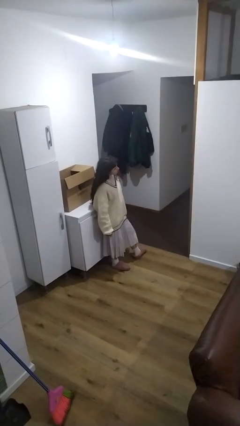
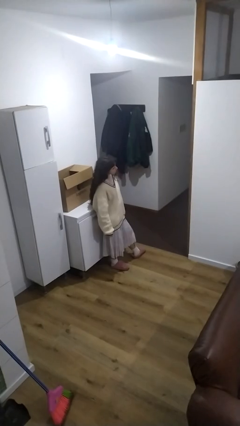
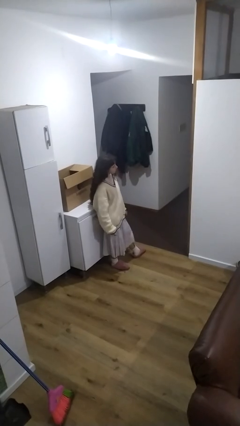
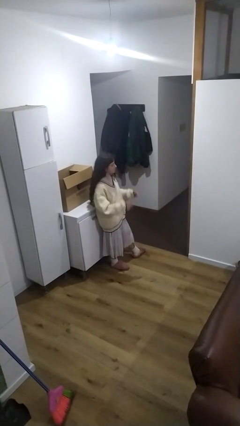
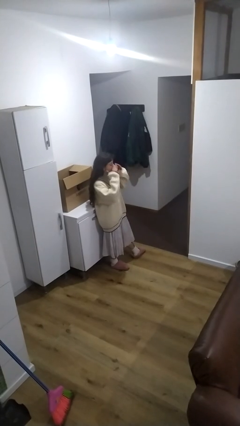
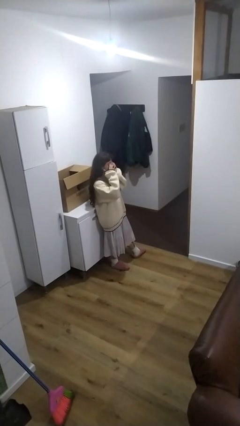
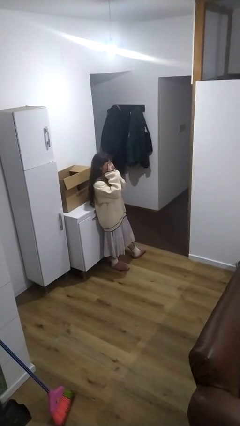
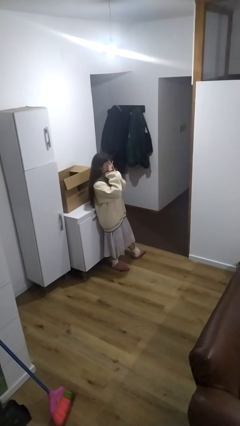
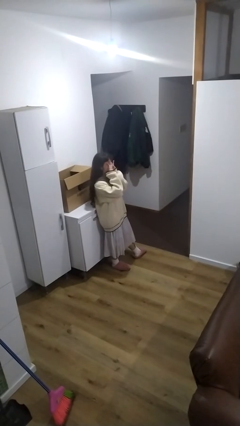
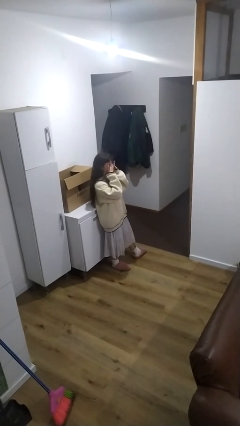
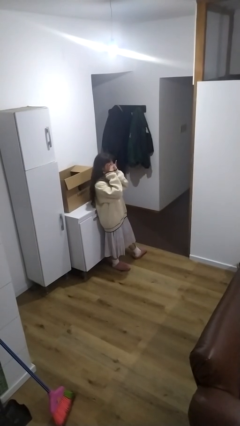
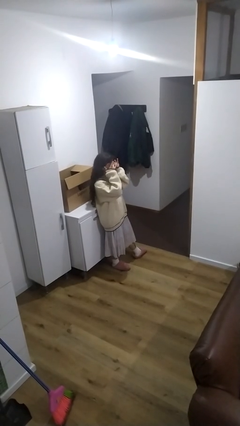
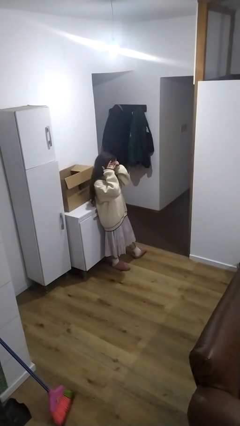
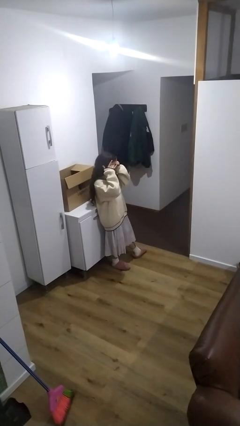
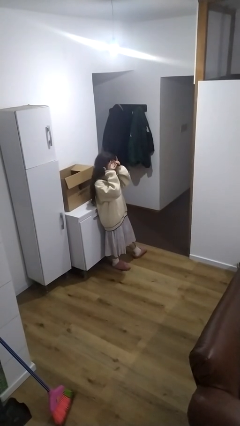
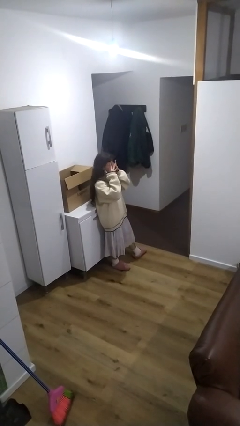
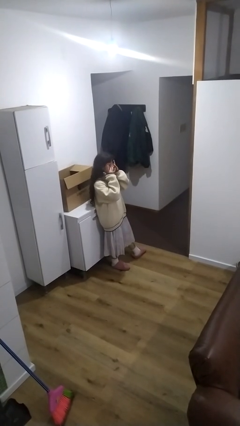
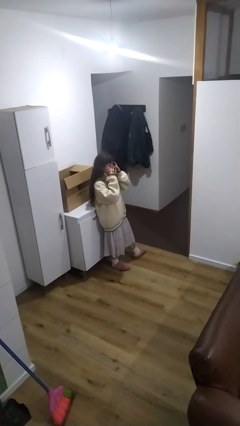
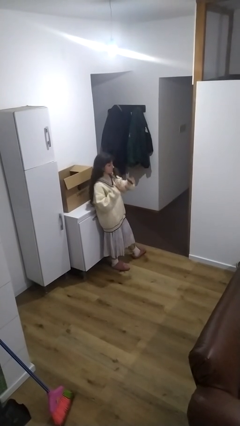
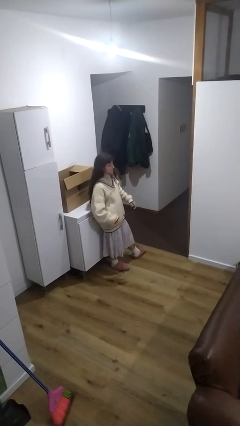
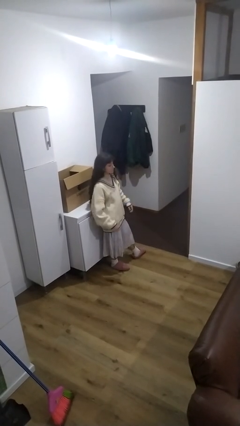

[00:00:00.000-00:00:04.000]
person rubs eyes

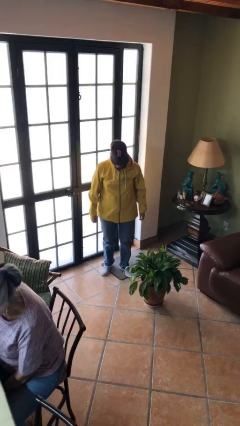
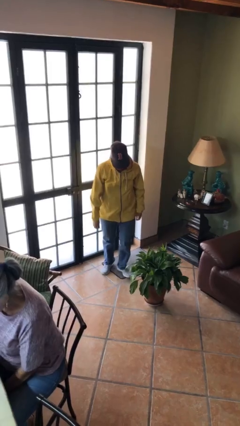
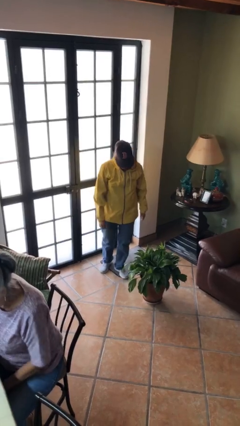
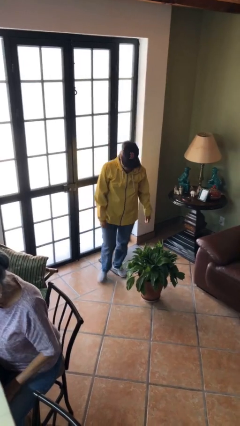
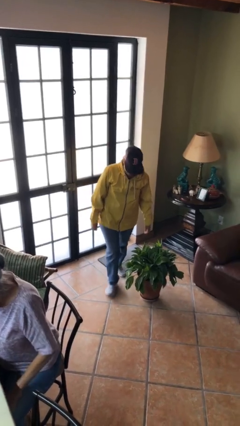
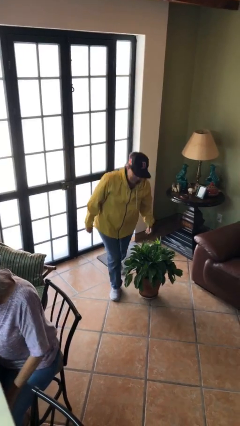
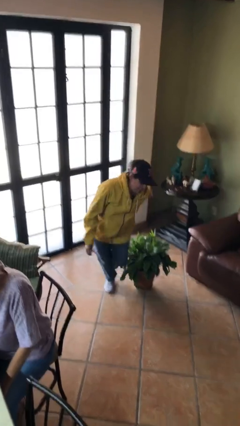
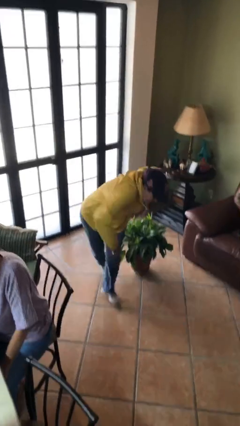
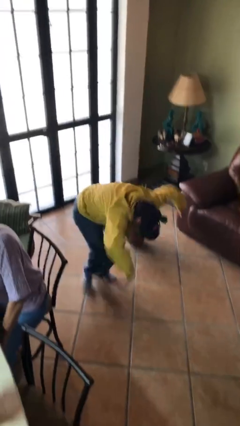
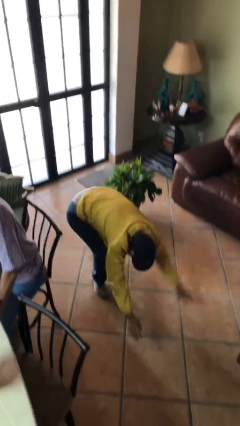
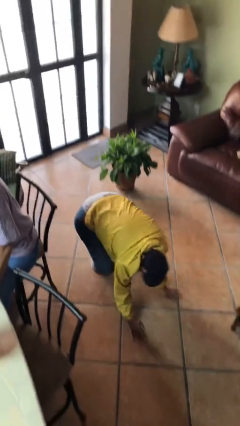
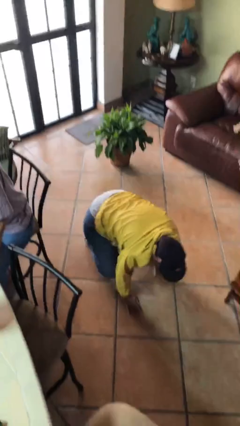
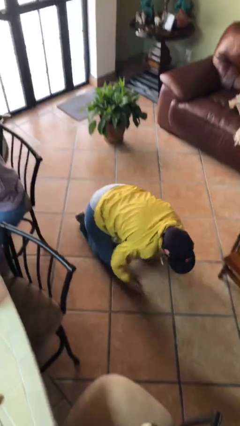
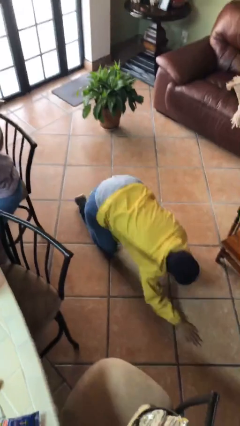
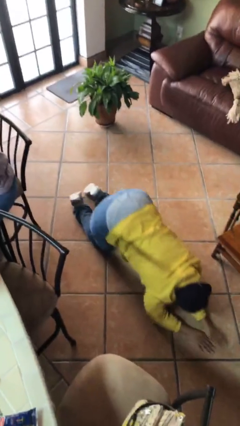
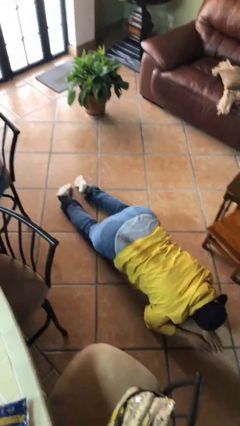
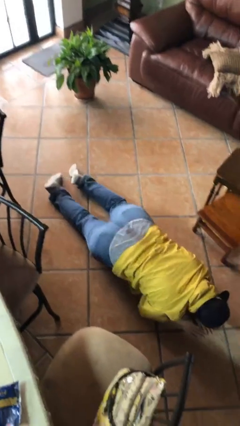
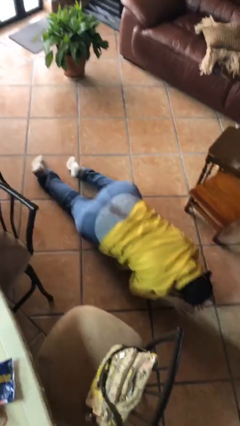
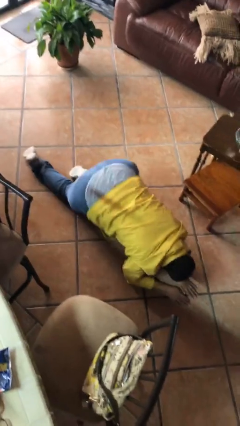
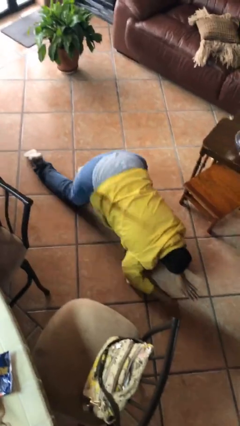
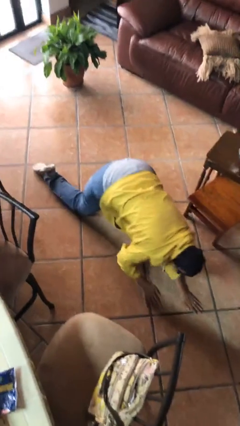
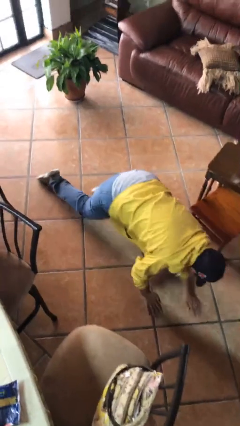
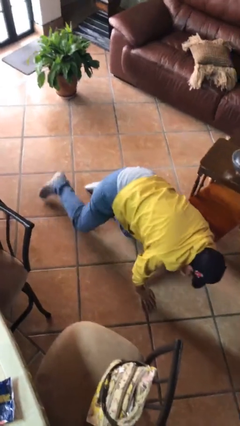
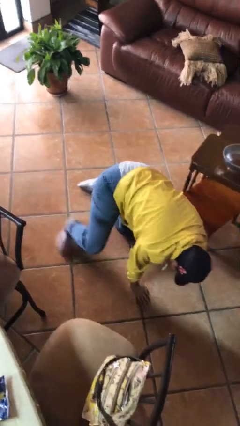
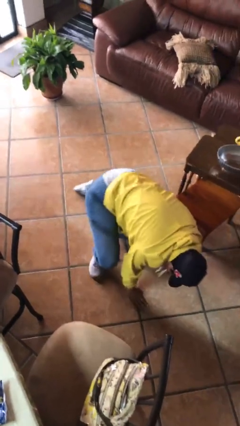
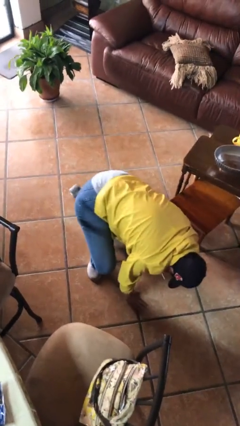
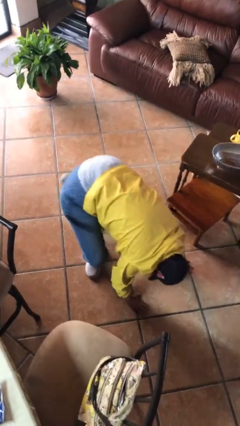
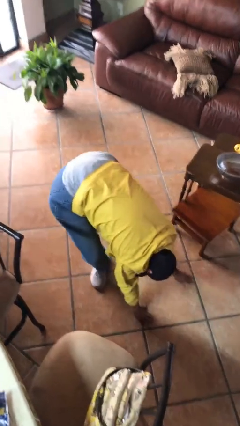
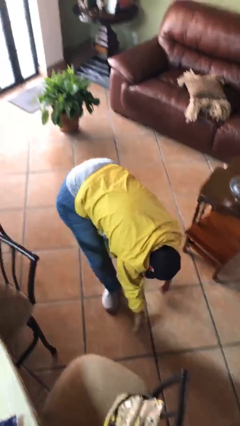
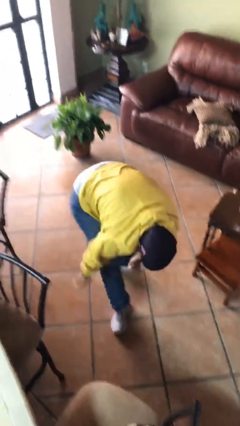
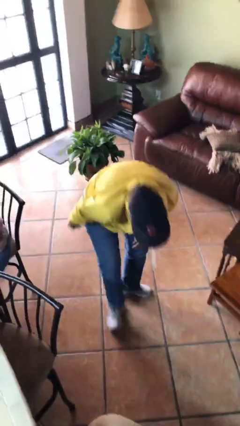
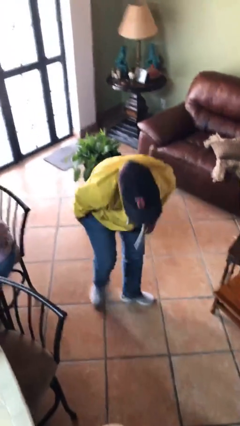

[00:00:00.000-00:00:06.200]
person trips on object on floor

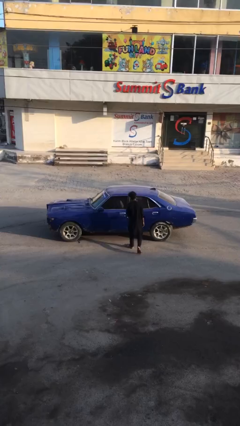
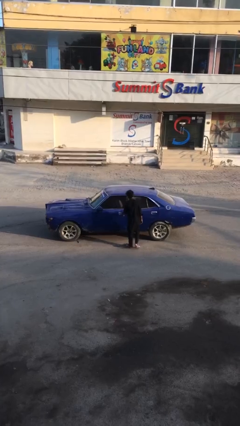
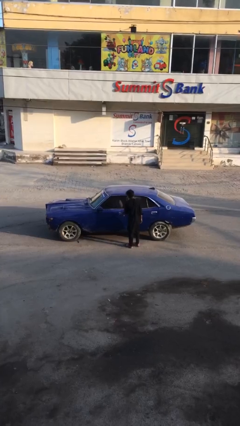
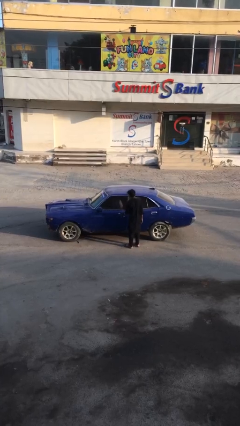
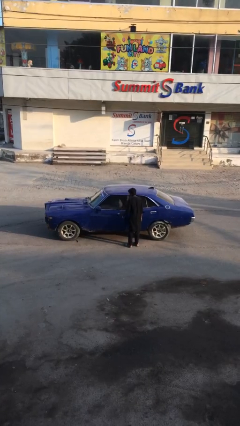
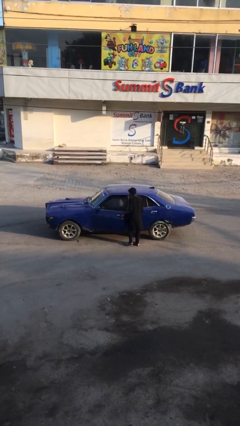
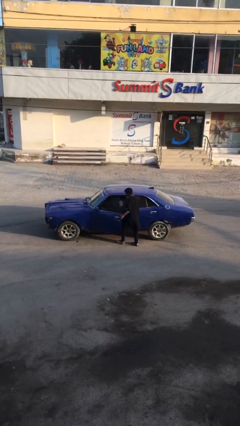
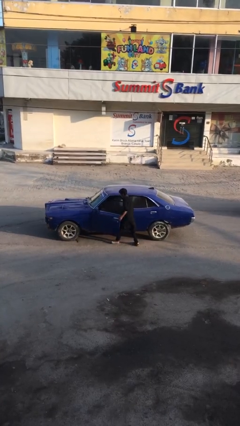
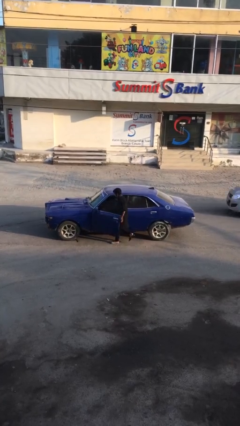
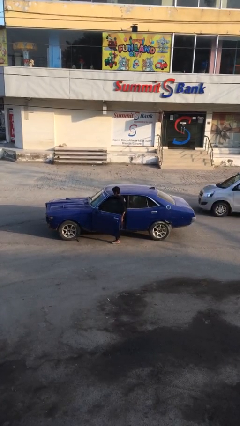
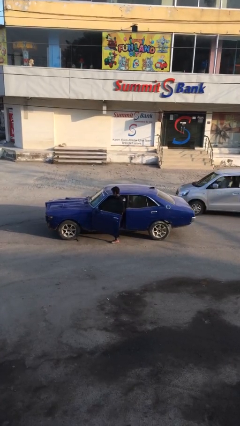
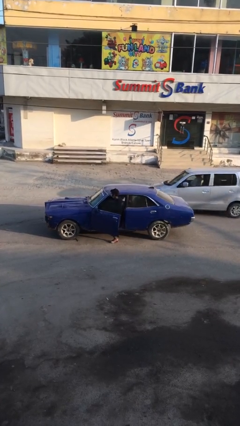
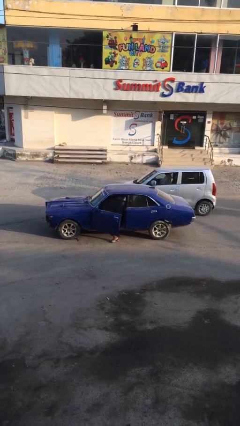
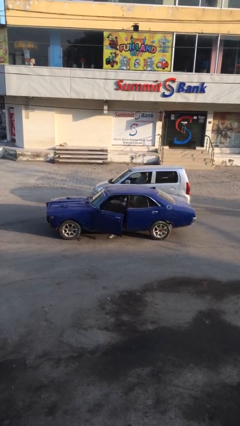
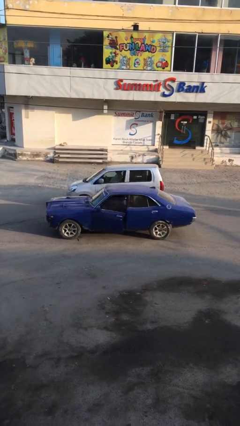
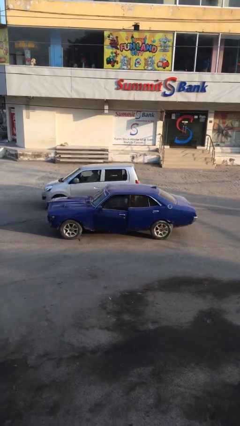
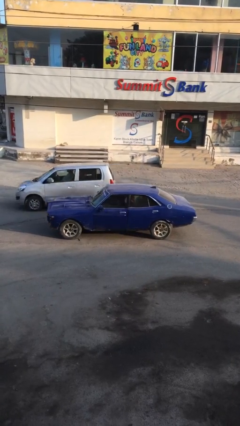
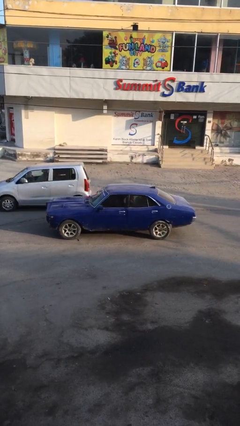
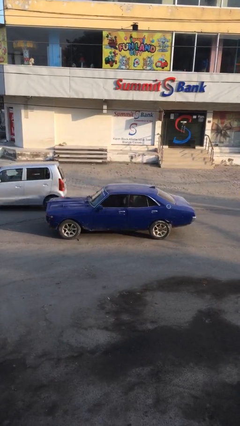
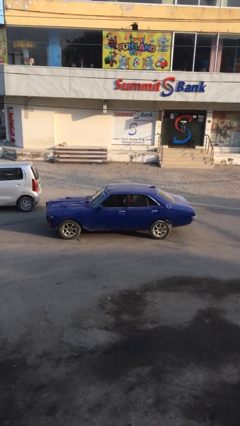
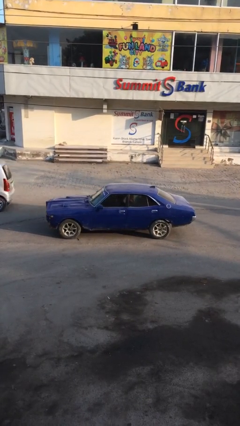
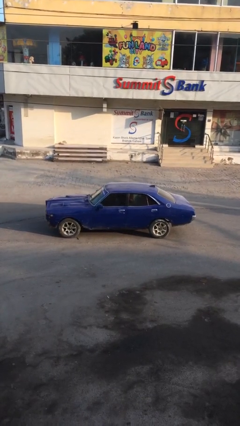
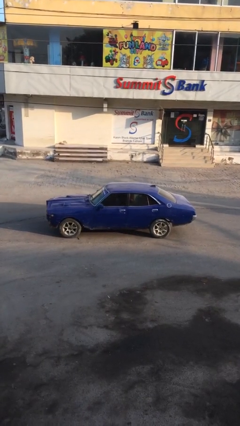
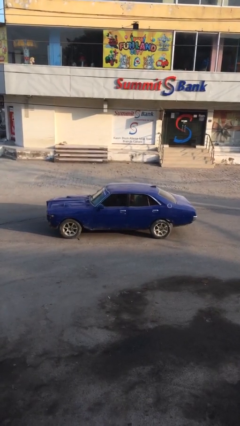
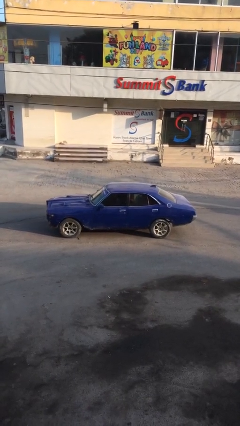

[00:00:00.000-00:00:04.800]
car picks up person

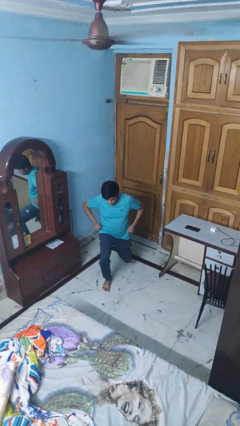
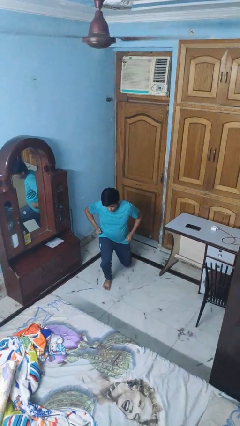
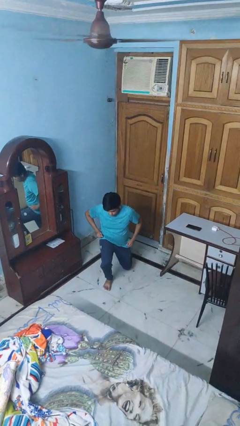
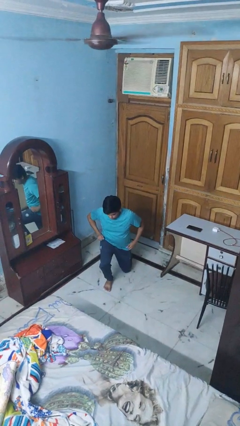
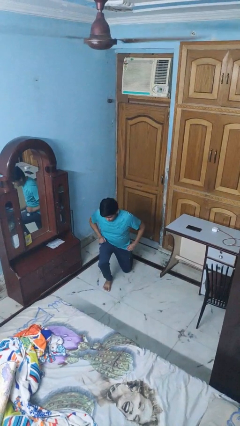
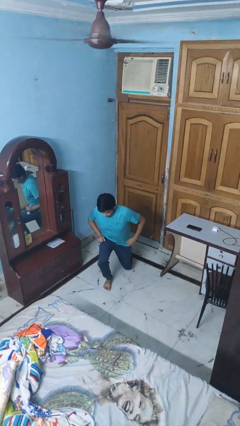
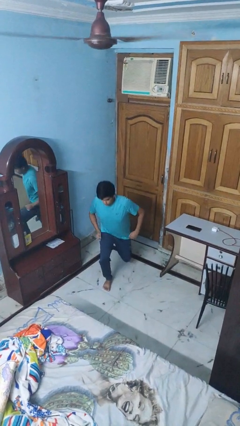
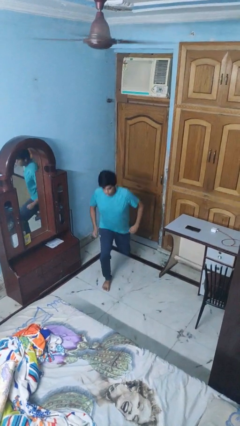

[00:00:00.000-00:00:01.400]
person exercises with lunges

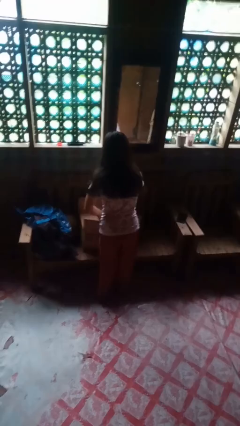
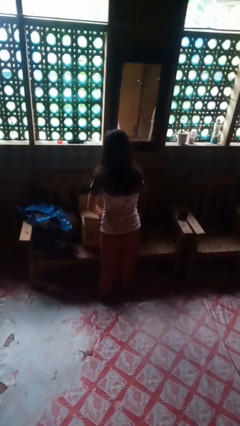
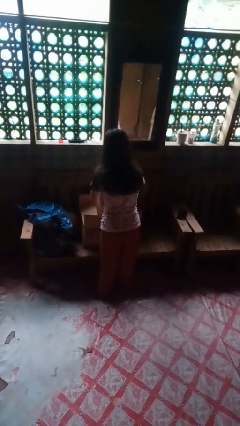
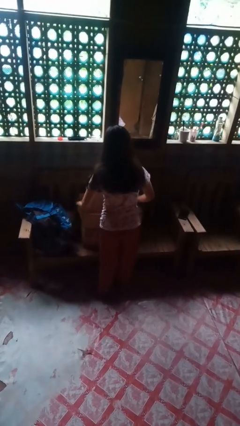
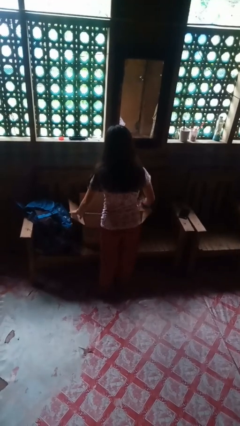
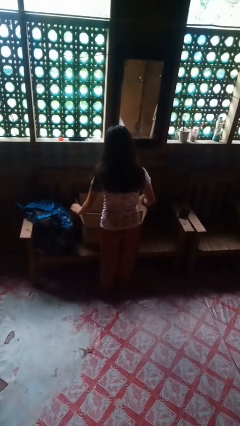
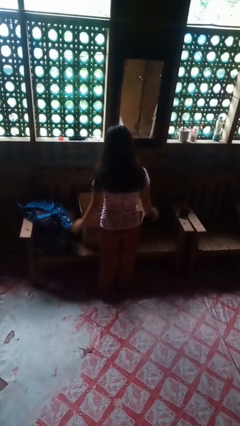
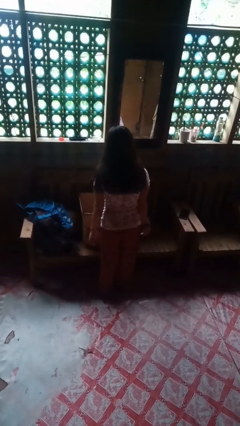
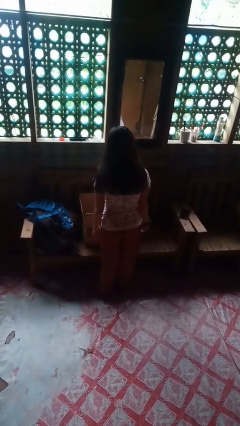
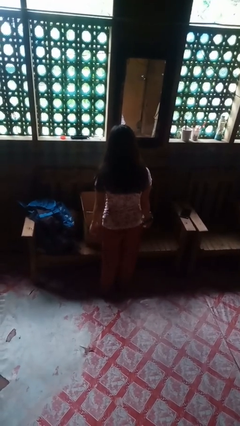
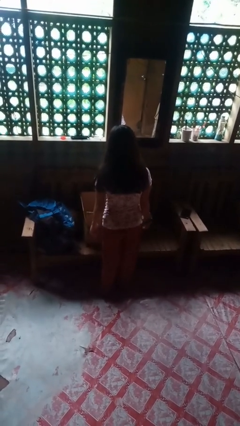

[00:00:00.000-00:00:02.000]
person opens box
